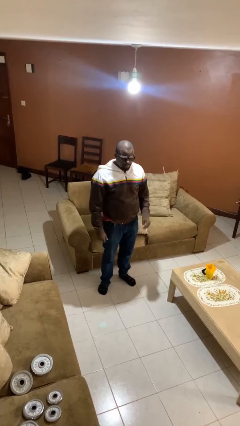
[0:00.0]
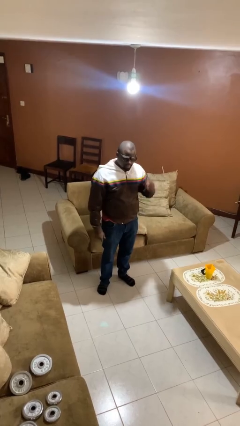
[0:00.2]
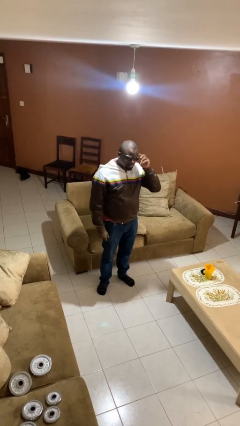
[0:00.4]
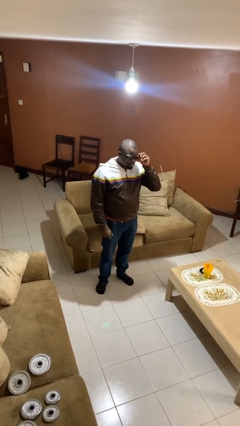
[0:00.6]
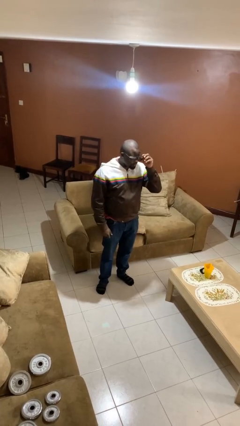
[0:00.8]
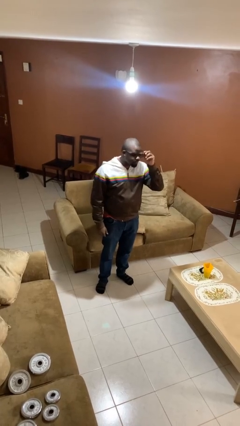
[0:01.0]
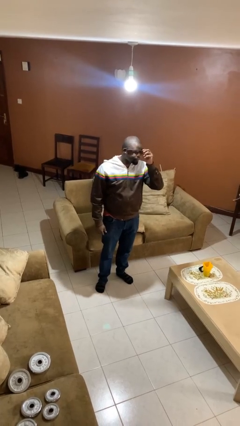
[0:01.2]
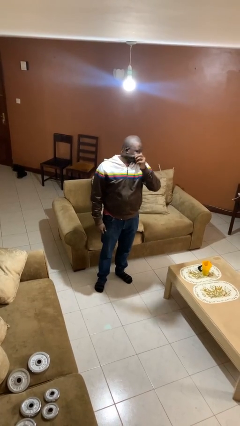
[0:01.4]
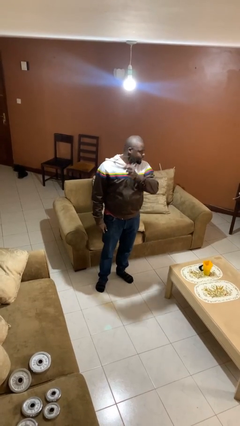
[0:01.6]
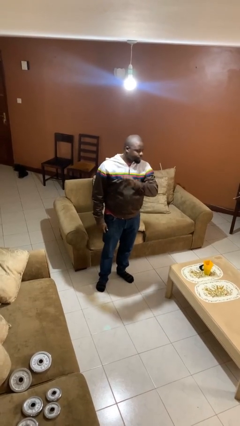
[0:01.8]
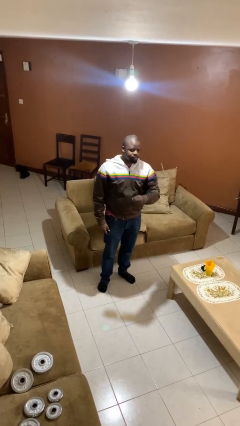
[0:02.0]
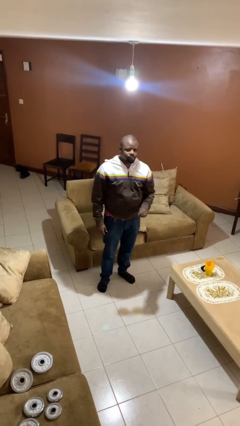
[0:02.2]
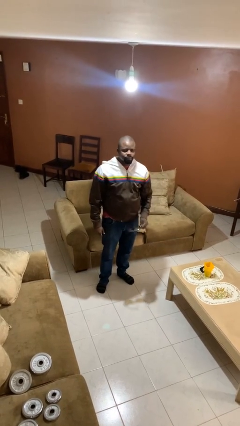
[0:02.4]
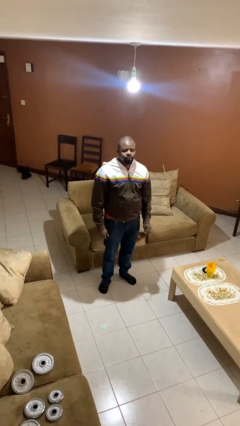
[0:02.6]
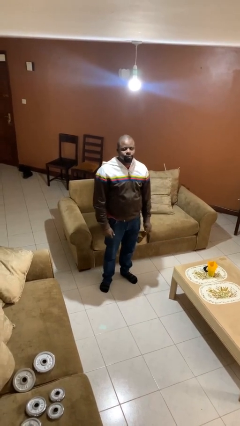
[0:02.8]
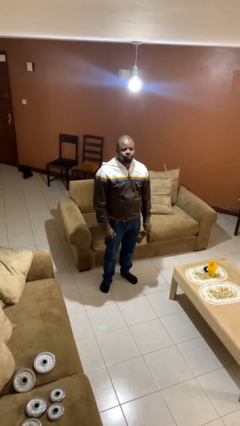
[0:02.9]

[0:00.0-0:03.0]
person takes off sunglasses

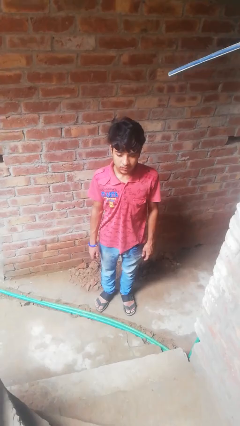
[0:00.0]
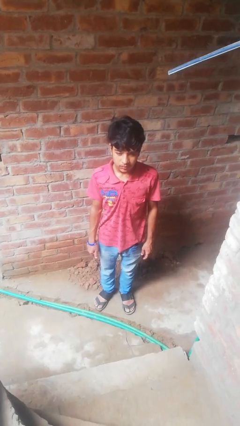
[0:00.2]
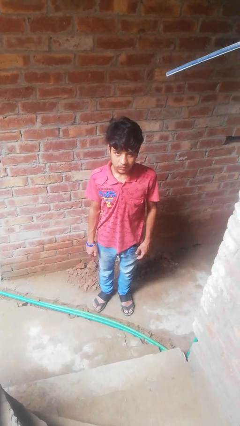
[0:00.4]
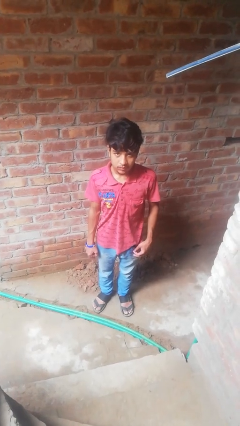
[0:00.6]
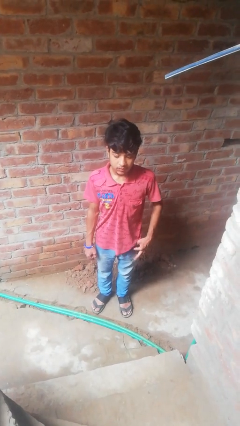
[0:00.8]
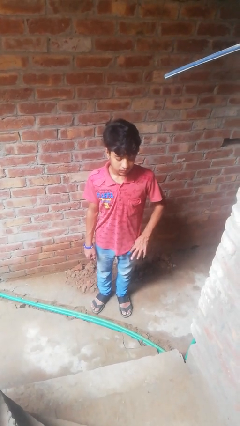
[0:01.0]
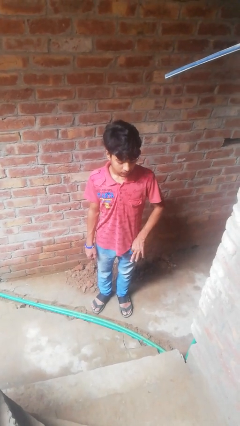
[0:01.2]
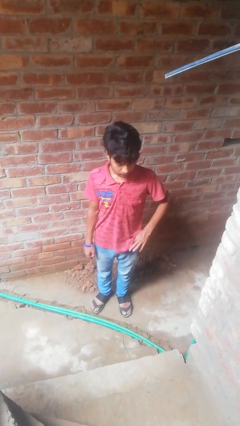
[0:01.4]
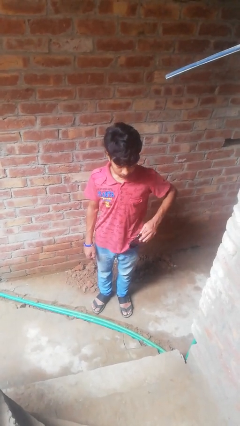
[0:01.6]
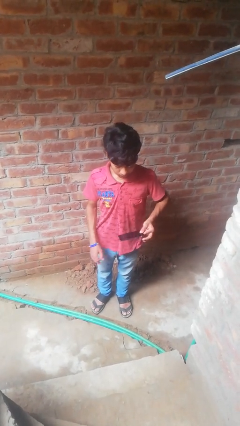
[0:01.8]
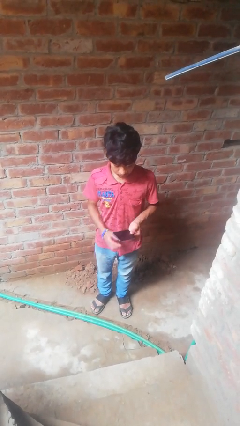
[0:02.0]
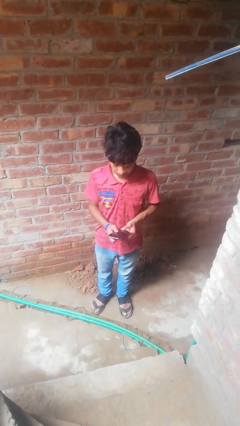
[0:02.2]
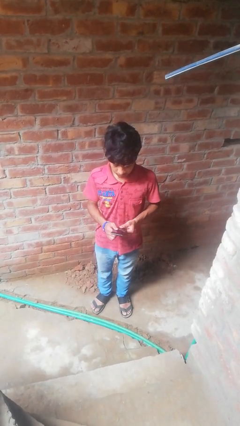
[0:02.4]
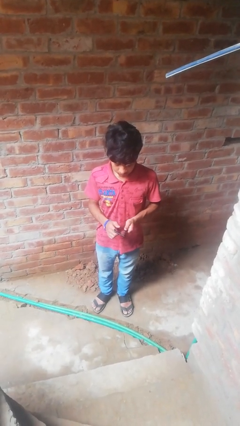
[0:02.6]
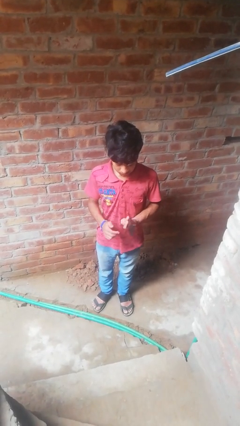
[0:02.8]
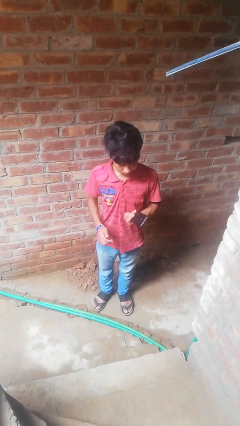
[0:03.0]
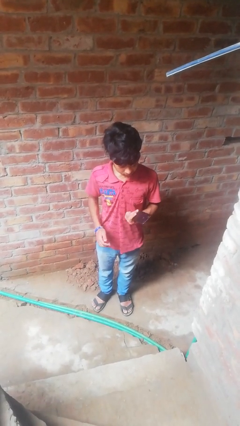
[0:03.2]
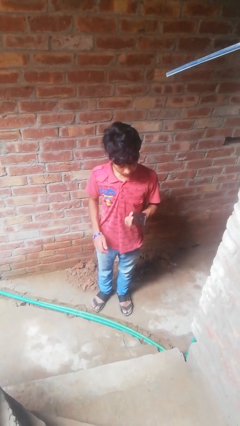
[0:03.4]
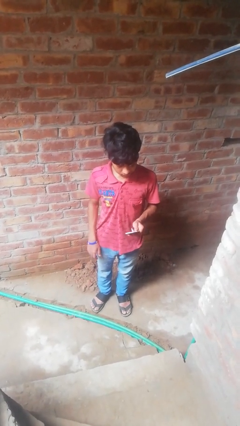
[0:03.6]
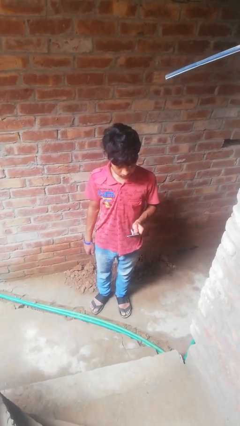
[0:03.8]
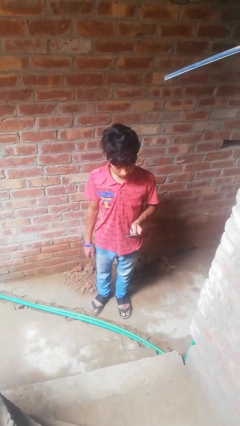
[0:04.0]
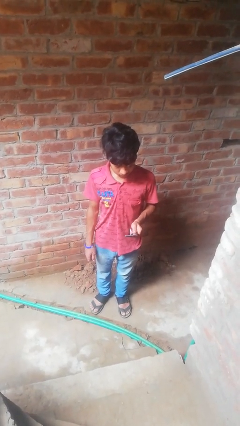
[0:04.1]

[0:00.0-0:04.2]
person takes phone from pocket

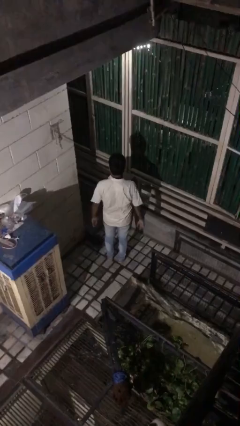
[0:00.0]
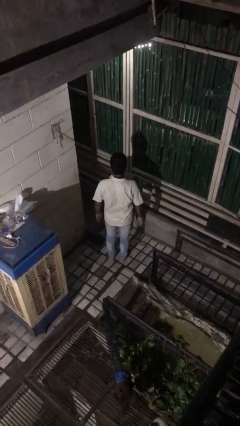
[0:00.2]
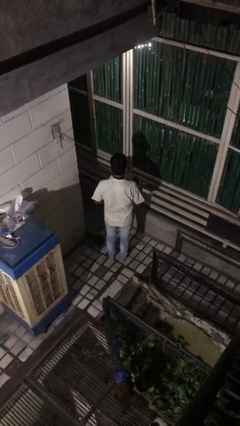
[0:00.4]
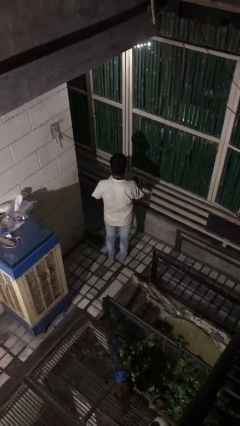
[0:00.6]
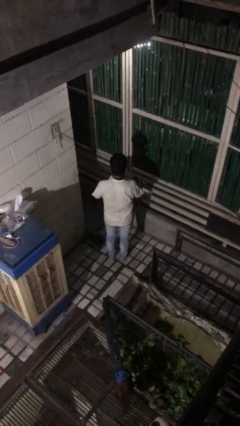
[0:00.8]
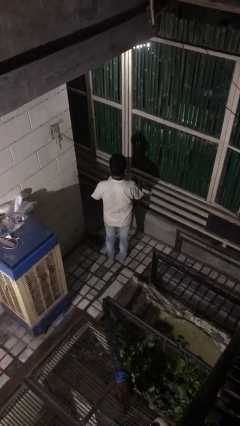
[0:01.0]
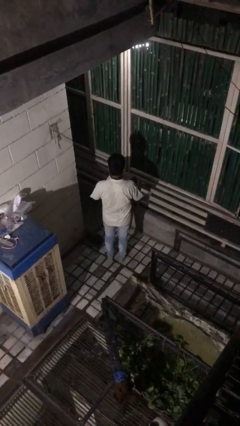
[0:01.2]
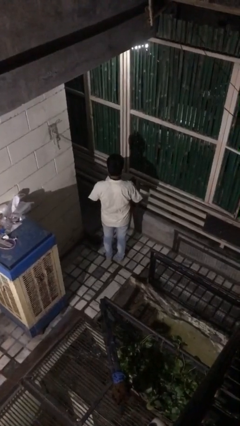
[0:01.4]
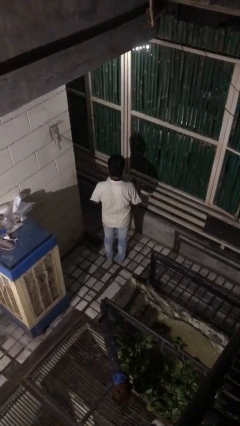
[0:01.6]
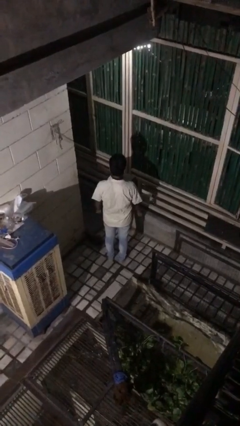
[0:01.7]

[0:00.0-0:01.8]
person takes off ring

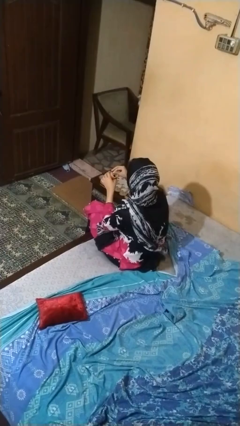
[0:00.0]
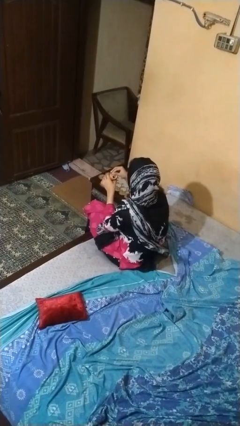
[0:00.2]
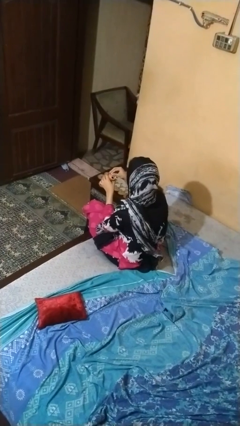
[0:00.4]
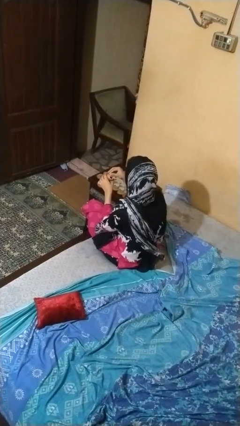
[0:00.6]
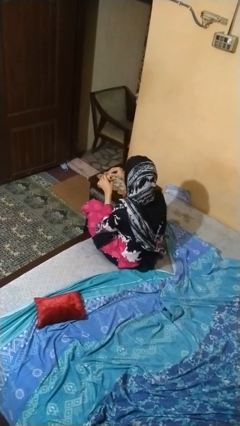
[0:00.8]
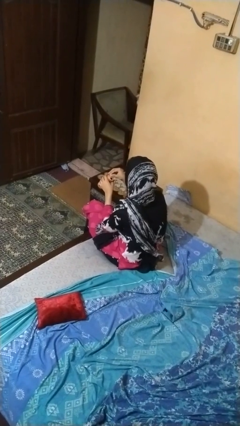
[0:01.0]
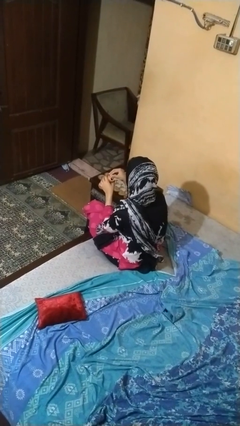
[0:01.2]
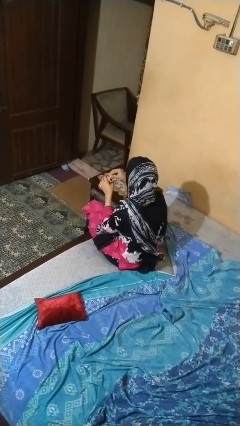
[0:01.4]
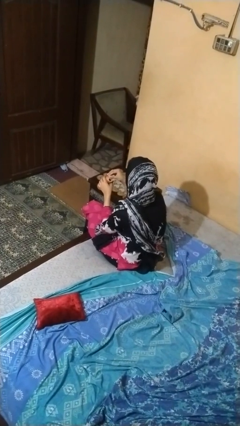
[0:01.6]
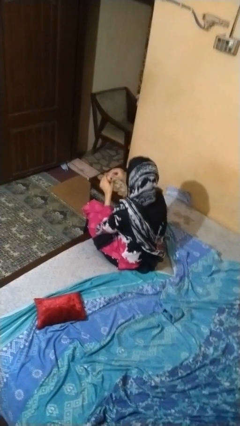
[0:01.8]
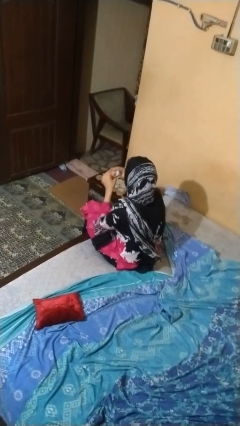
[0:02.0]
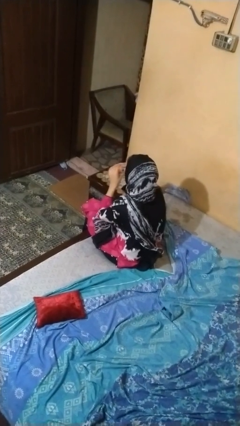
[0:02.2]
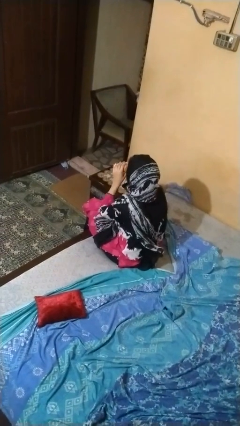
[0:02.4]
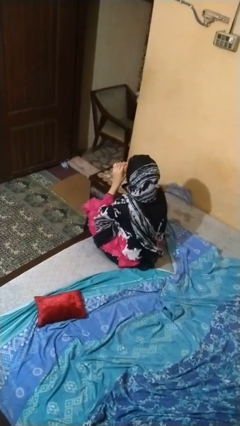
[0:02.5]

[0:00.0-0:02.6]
person opens beverage can

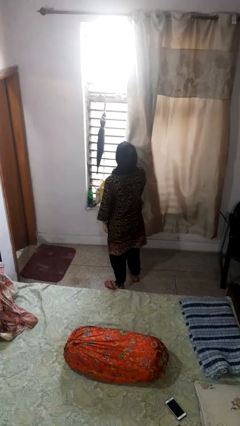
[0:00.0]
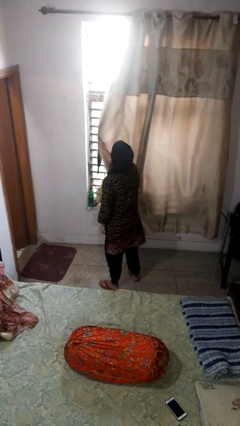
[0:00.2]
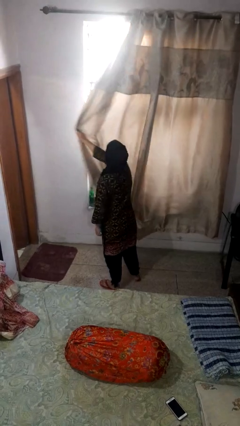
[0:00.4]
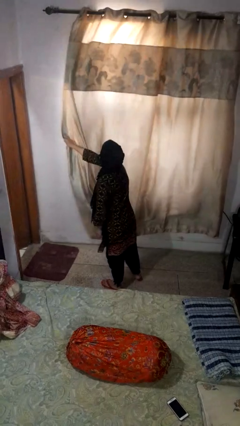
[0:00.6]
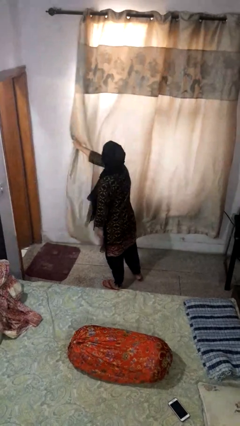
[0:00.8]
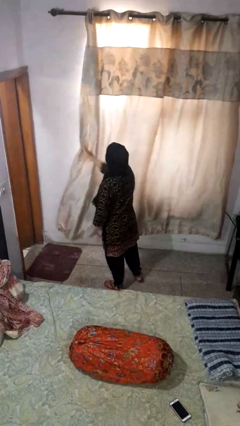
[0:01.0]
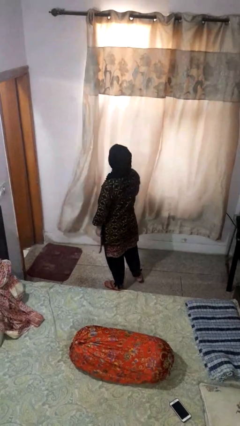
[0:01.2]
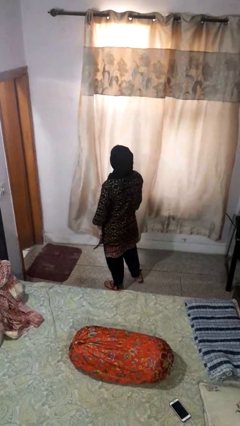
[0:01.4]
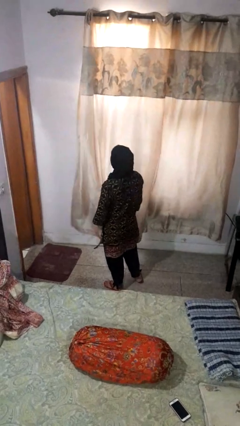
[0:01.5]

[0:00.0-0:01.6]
person closes curtains

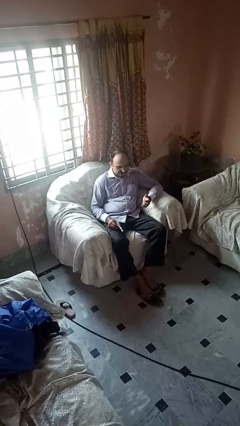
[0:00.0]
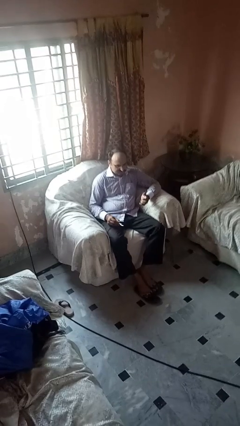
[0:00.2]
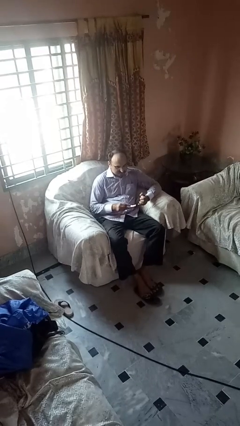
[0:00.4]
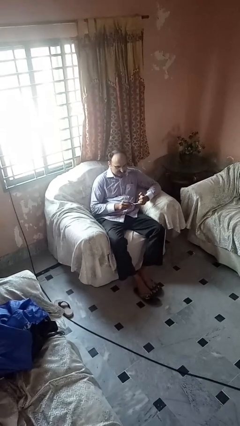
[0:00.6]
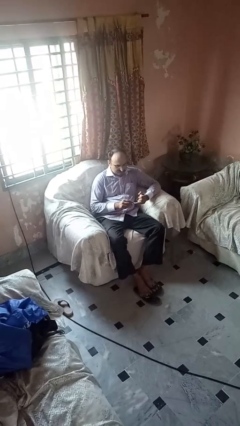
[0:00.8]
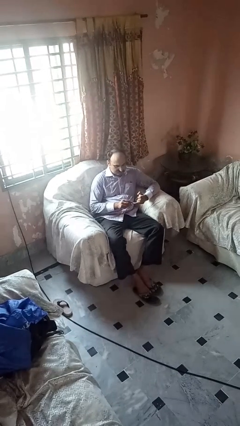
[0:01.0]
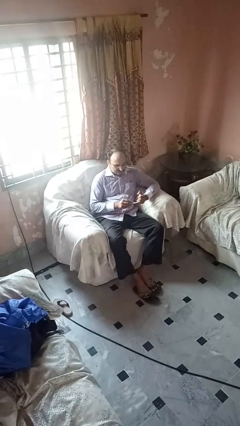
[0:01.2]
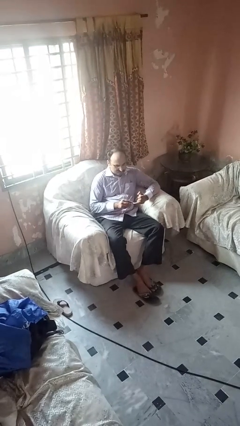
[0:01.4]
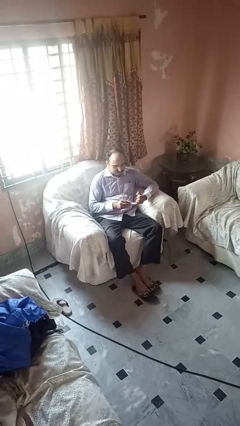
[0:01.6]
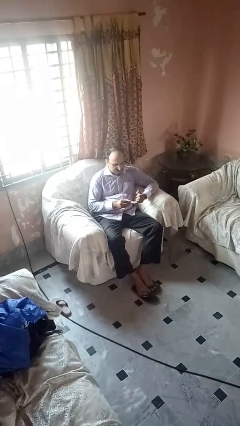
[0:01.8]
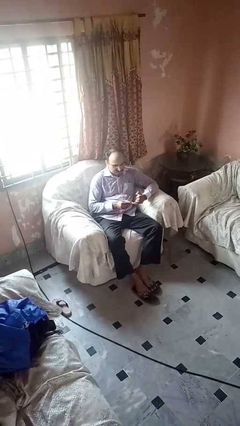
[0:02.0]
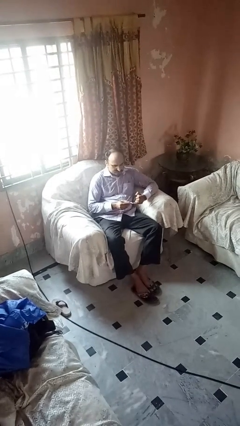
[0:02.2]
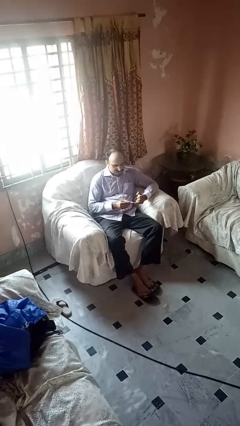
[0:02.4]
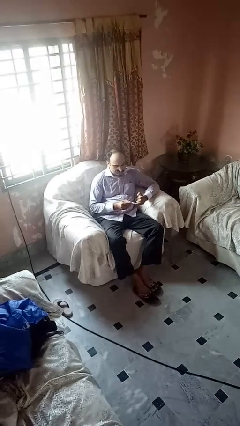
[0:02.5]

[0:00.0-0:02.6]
person files fingernails

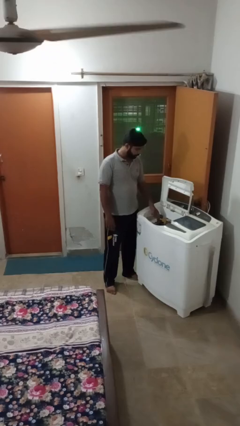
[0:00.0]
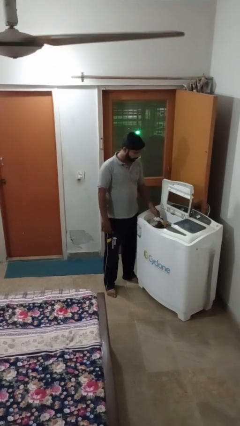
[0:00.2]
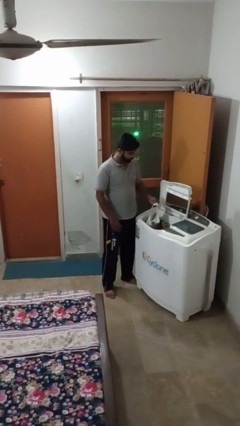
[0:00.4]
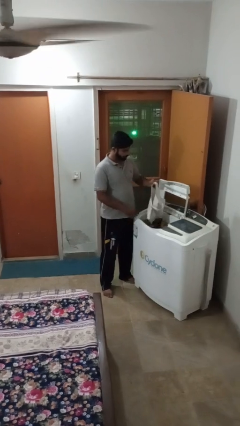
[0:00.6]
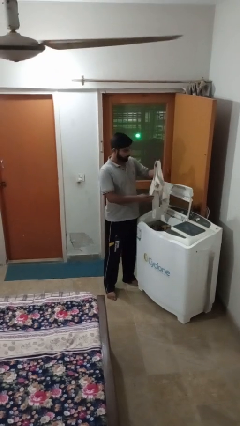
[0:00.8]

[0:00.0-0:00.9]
person loads clotheswasher

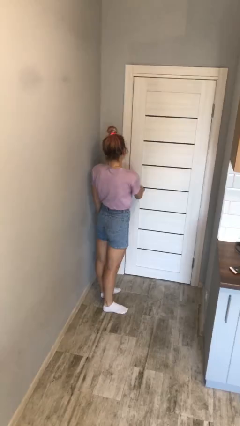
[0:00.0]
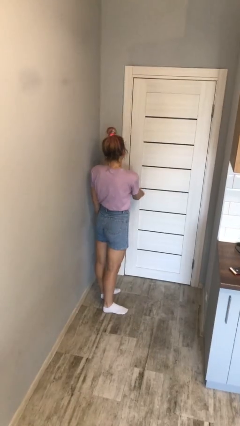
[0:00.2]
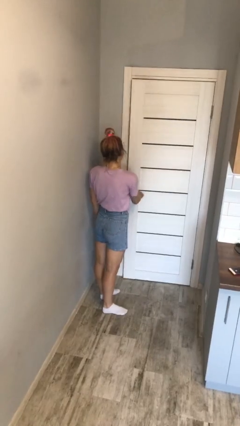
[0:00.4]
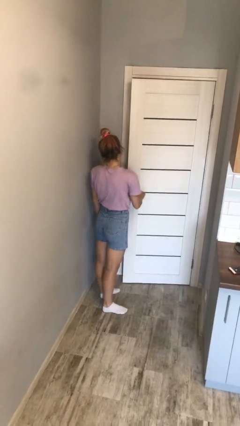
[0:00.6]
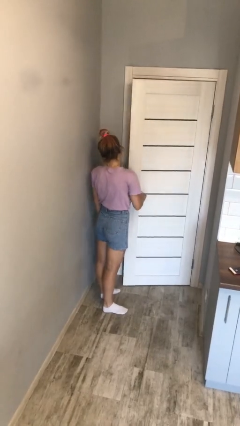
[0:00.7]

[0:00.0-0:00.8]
person opens facility door
